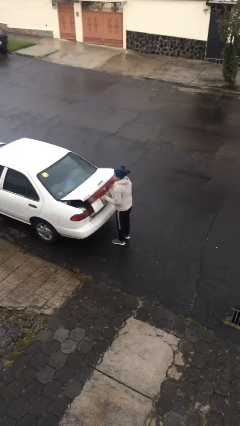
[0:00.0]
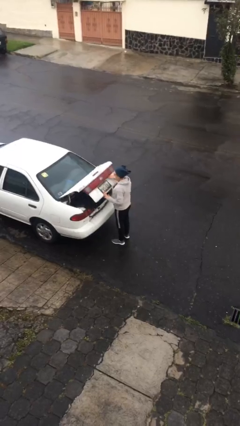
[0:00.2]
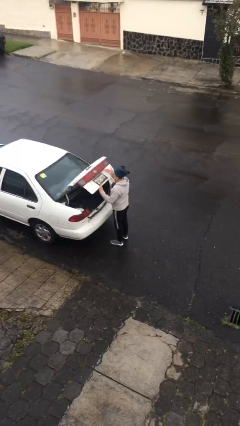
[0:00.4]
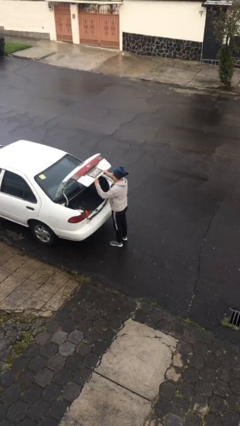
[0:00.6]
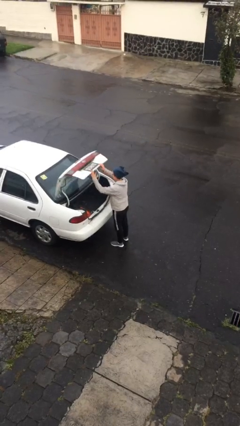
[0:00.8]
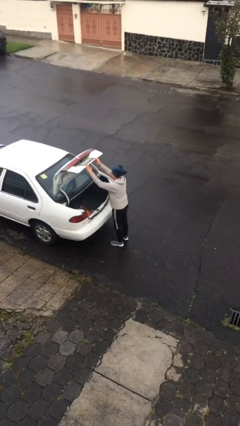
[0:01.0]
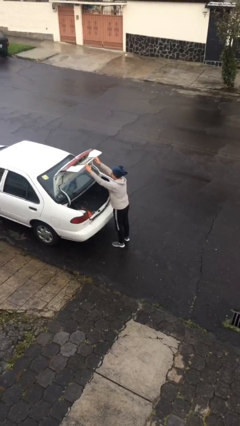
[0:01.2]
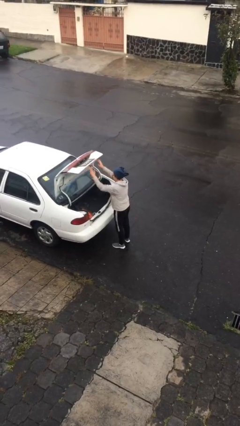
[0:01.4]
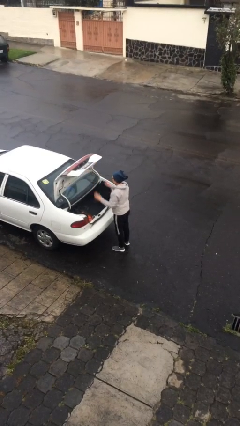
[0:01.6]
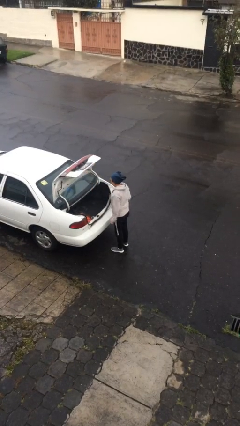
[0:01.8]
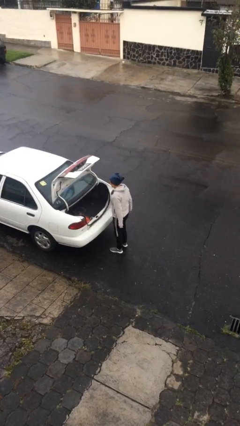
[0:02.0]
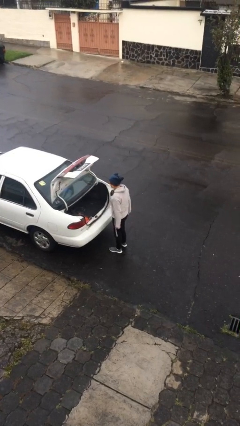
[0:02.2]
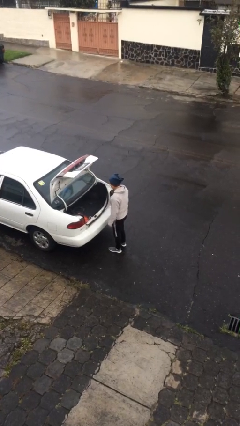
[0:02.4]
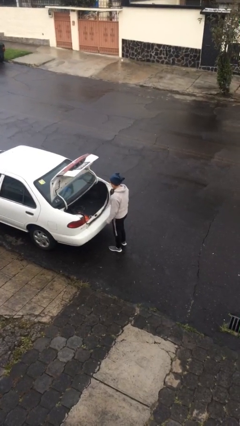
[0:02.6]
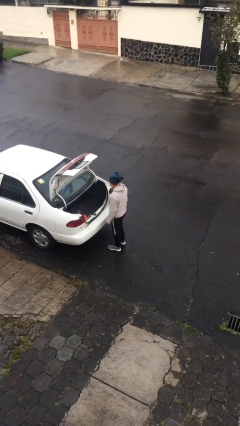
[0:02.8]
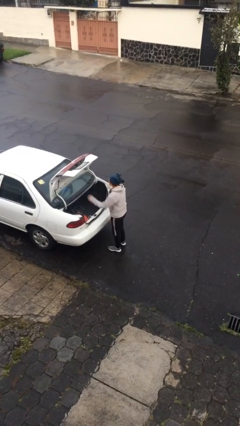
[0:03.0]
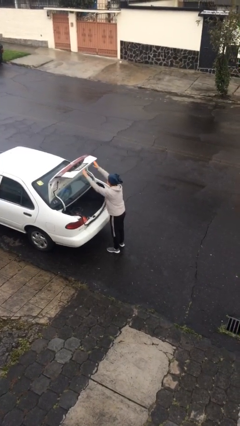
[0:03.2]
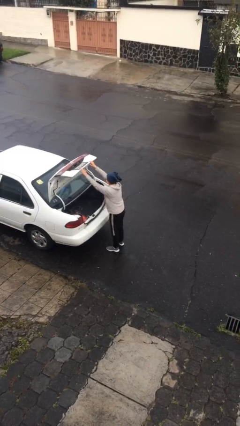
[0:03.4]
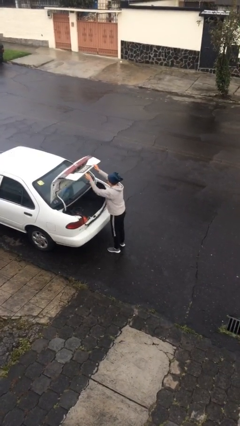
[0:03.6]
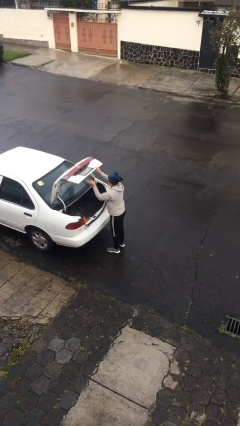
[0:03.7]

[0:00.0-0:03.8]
person opens car trunk

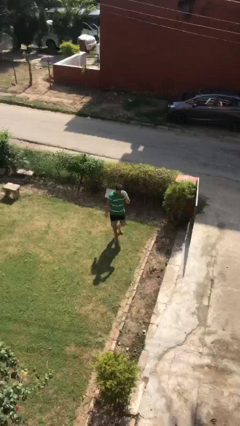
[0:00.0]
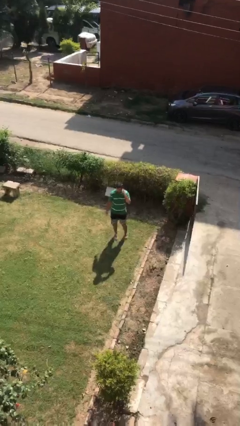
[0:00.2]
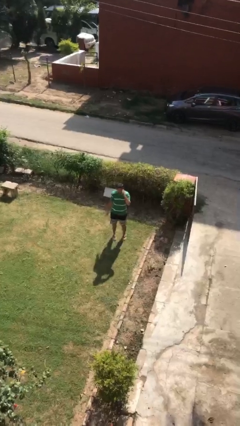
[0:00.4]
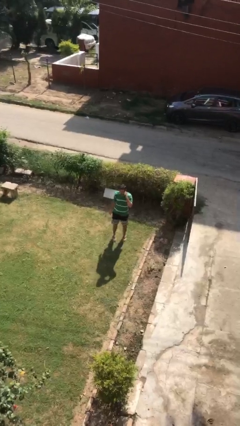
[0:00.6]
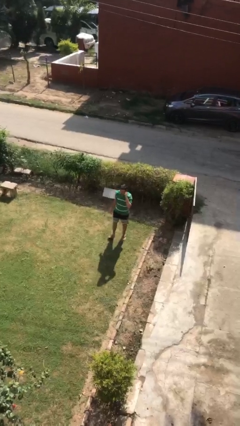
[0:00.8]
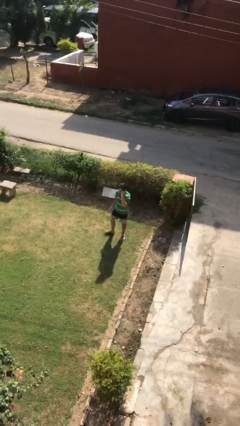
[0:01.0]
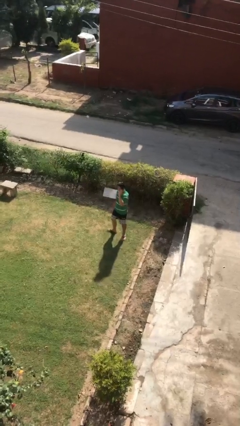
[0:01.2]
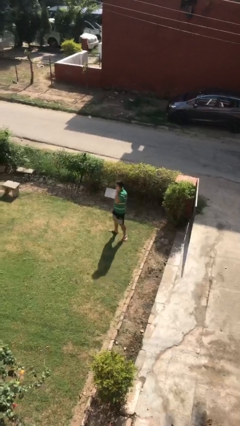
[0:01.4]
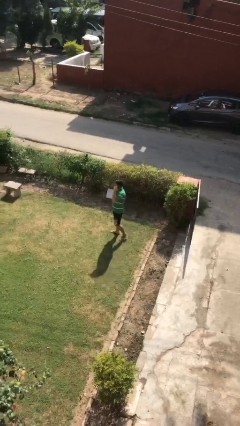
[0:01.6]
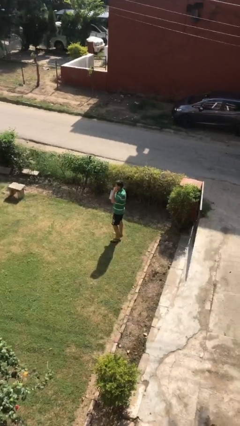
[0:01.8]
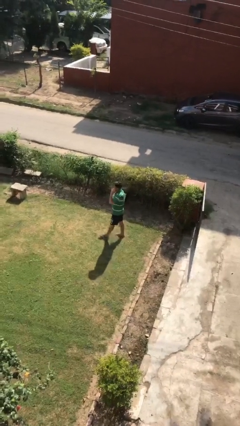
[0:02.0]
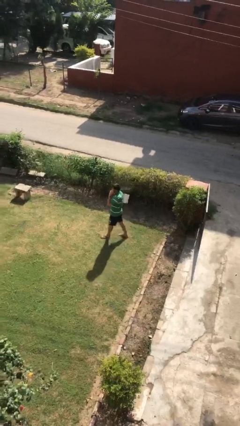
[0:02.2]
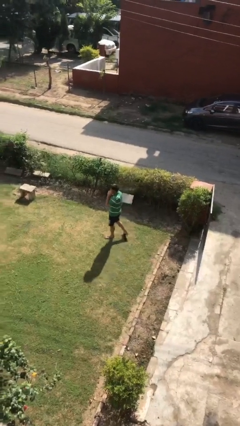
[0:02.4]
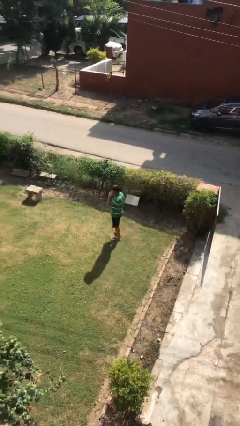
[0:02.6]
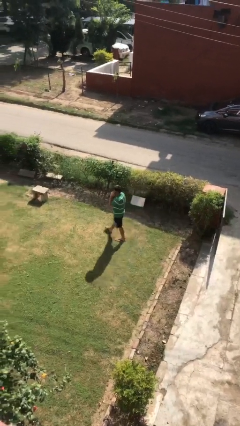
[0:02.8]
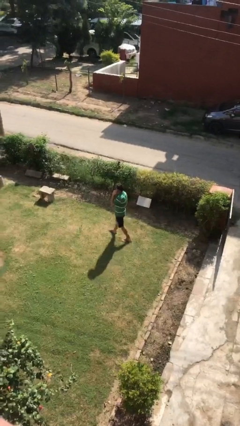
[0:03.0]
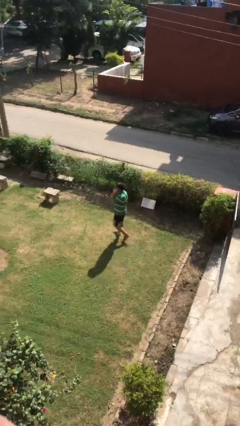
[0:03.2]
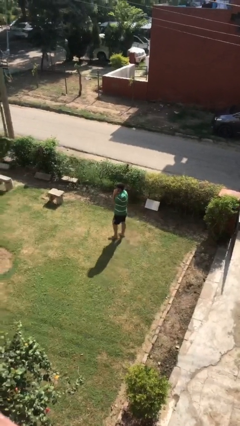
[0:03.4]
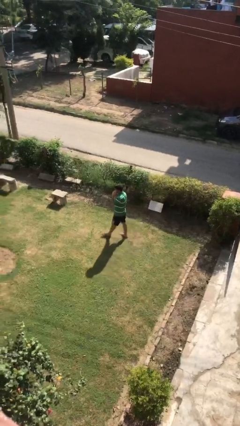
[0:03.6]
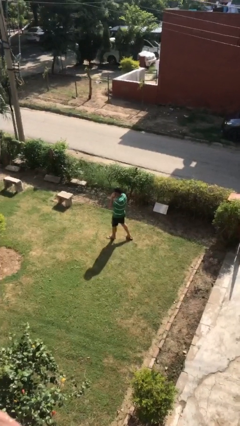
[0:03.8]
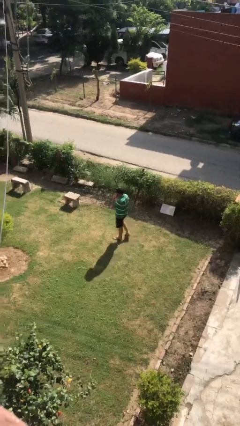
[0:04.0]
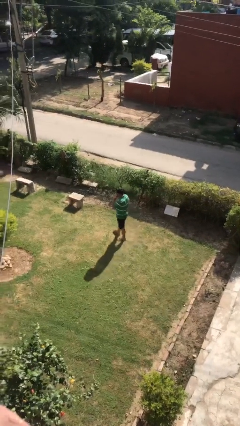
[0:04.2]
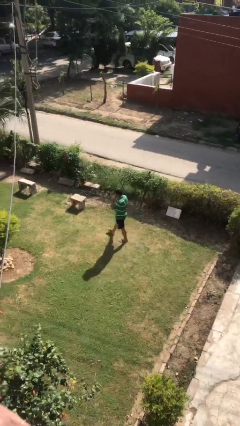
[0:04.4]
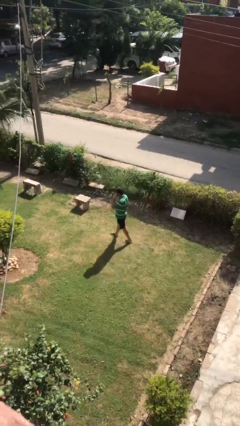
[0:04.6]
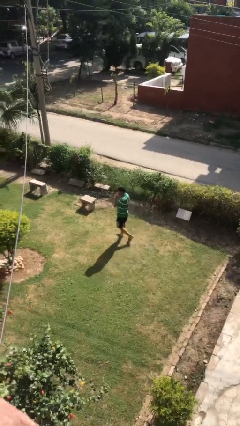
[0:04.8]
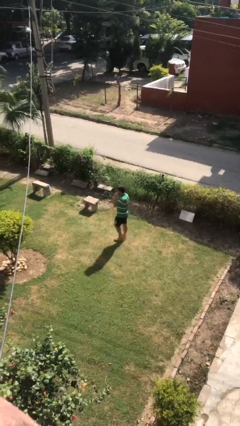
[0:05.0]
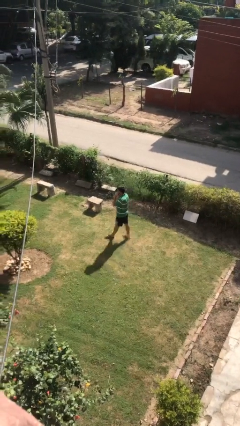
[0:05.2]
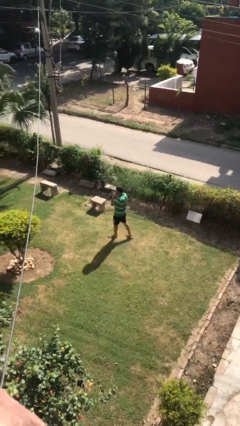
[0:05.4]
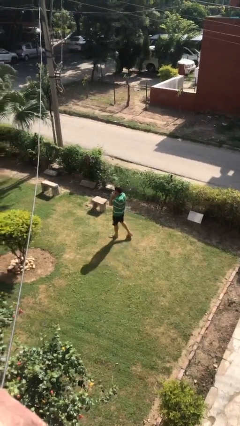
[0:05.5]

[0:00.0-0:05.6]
person talks on phone

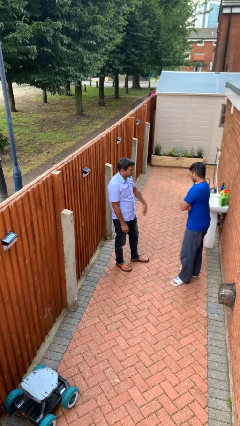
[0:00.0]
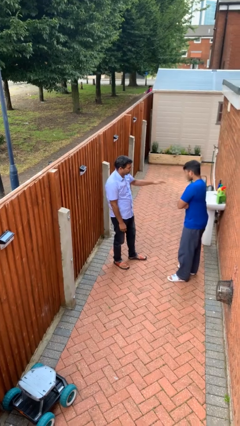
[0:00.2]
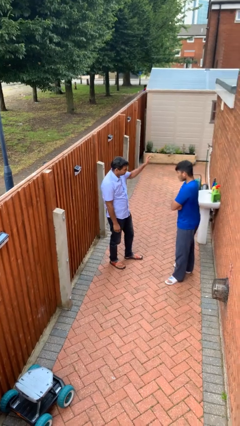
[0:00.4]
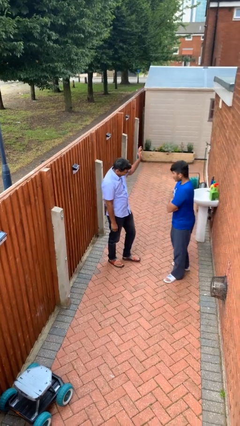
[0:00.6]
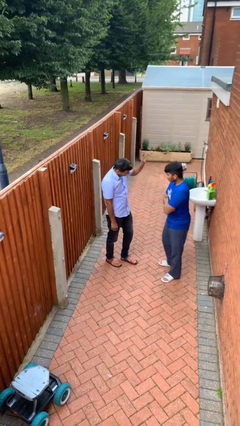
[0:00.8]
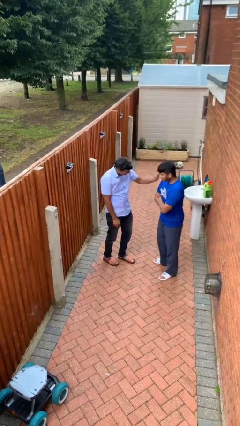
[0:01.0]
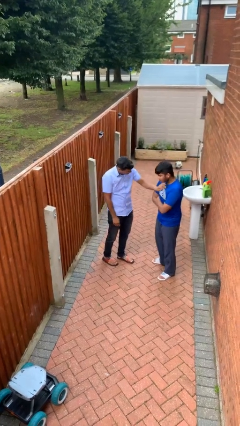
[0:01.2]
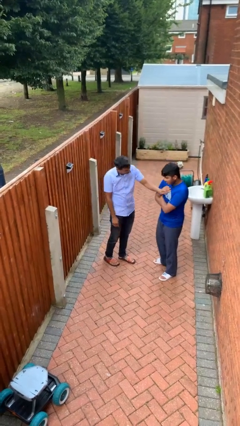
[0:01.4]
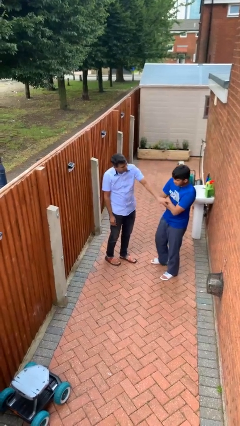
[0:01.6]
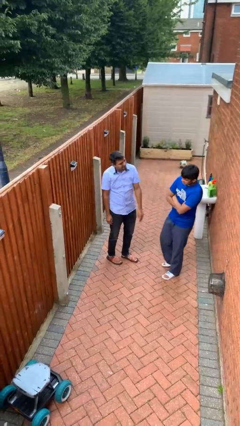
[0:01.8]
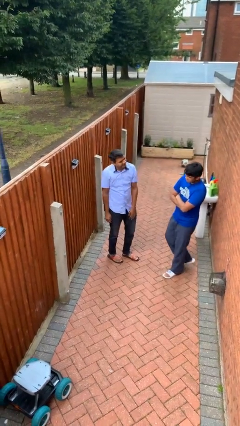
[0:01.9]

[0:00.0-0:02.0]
person shoves person

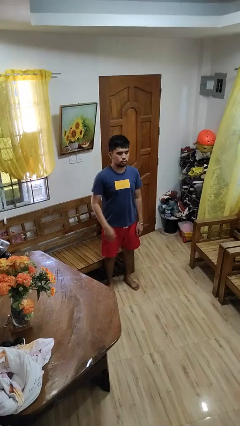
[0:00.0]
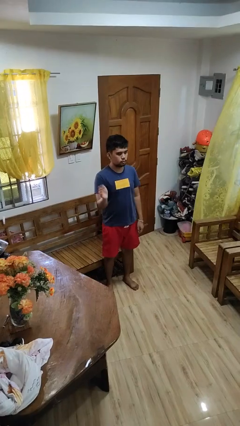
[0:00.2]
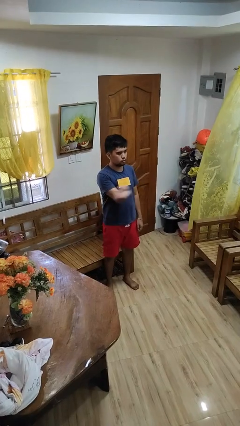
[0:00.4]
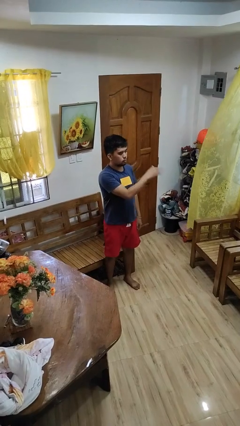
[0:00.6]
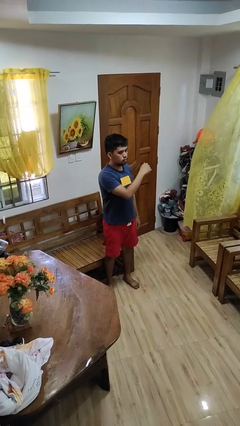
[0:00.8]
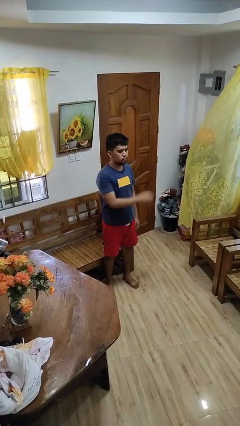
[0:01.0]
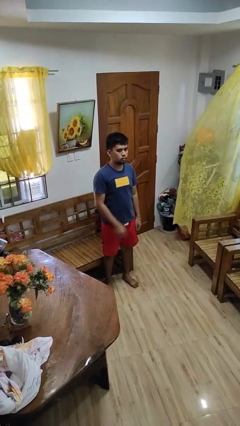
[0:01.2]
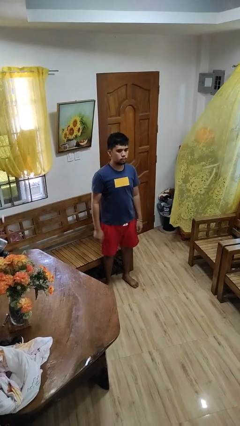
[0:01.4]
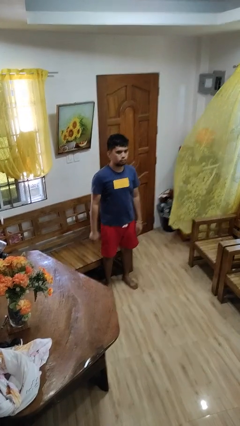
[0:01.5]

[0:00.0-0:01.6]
person gestures swipe left

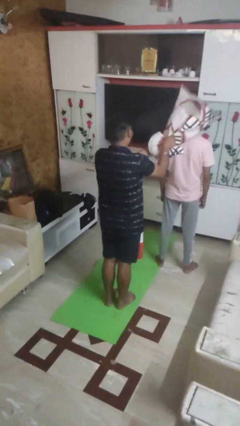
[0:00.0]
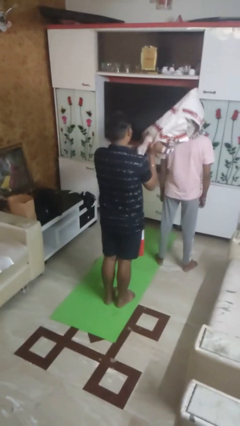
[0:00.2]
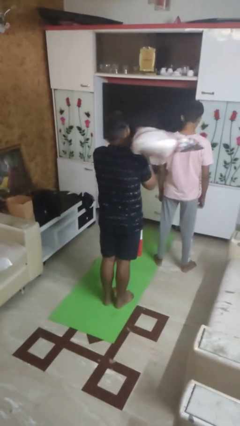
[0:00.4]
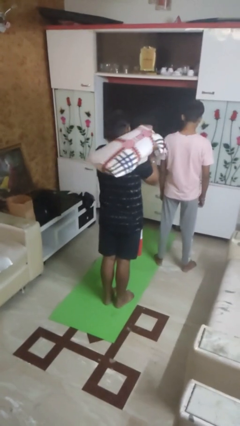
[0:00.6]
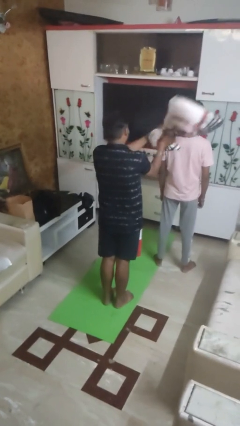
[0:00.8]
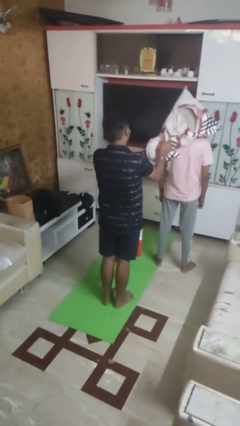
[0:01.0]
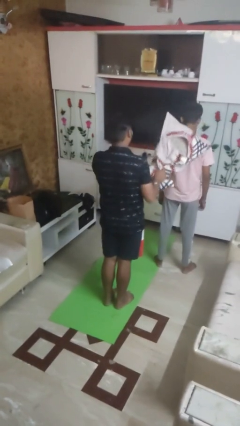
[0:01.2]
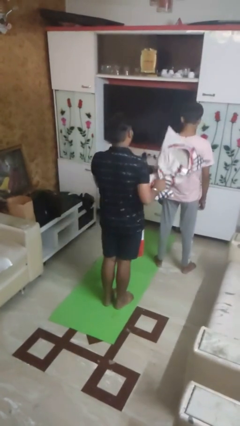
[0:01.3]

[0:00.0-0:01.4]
person hits person with pillow

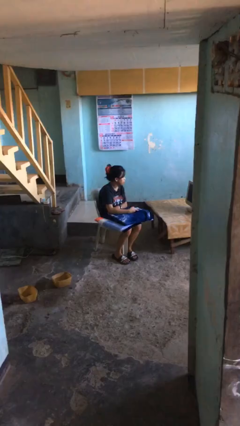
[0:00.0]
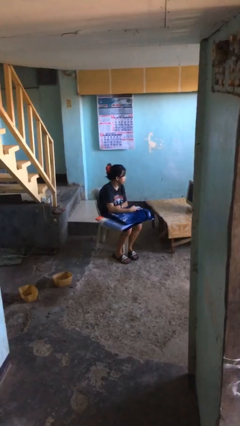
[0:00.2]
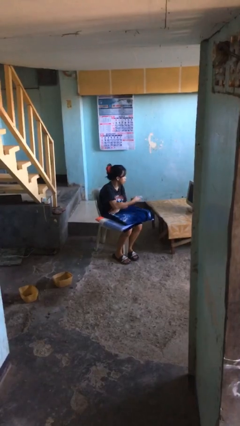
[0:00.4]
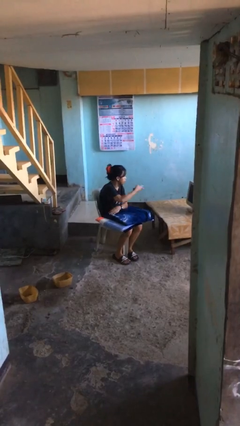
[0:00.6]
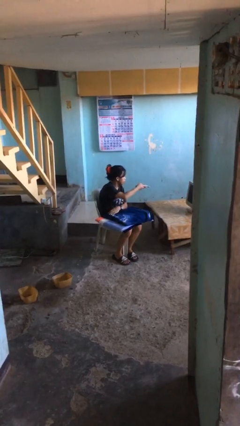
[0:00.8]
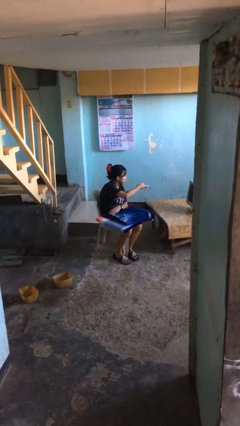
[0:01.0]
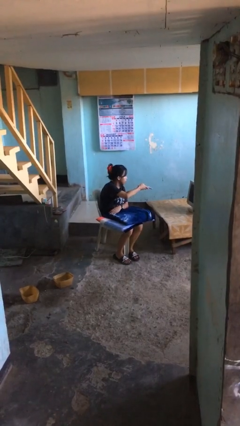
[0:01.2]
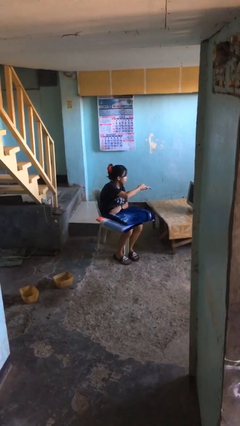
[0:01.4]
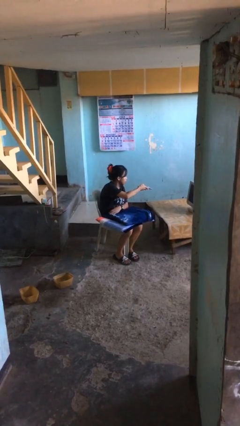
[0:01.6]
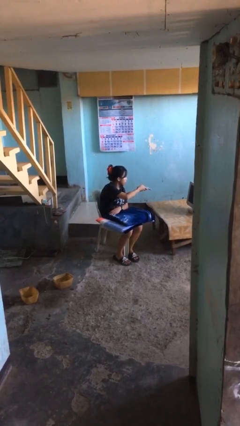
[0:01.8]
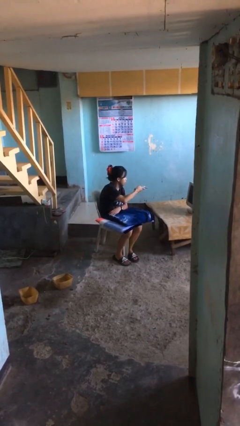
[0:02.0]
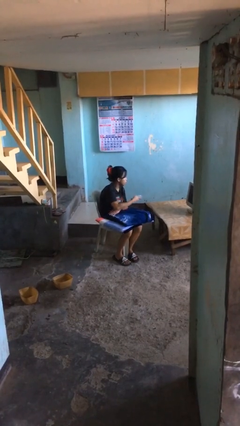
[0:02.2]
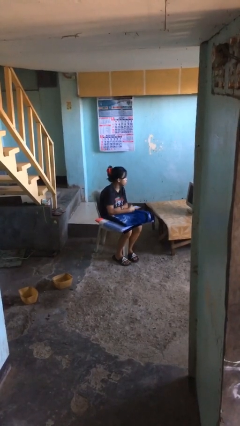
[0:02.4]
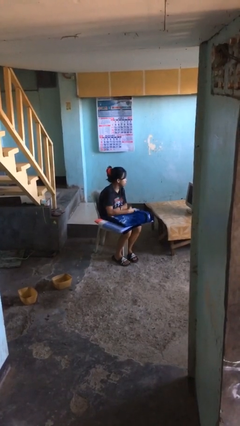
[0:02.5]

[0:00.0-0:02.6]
person uses television remote
